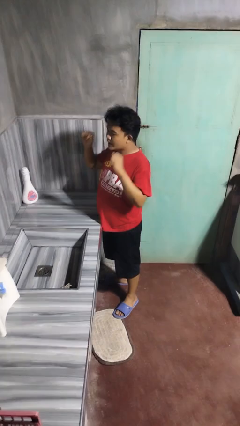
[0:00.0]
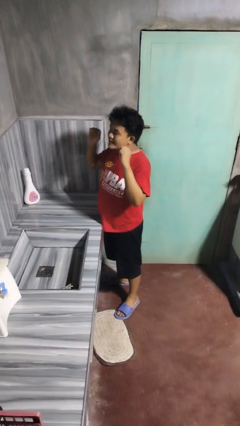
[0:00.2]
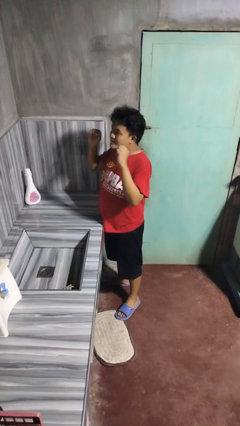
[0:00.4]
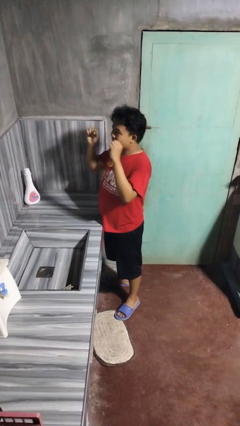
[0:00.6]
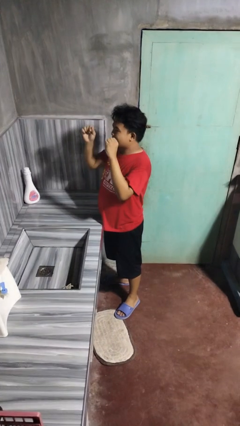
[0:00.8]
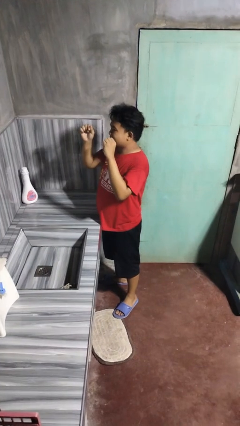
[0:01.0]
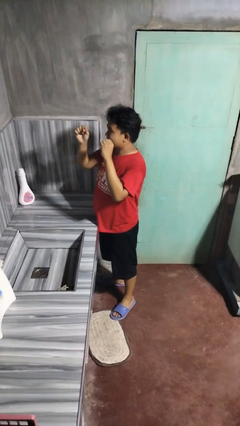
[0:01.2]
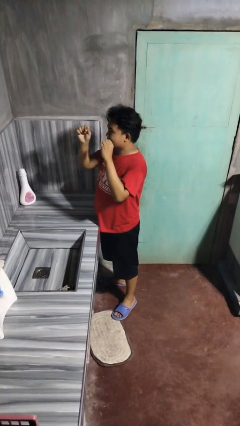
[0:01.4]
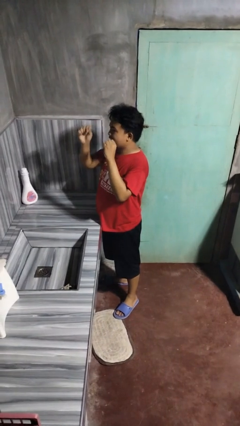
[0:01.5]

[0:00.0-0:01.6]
person flosses

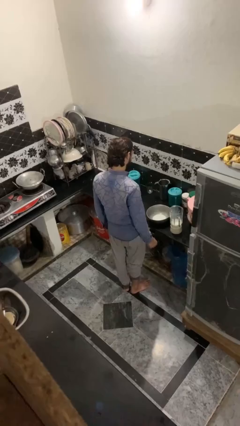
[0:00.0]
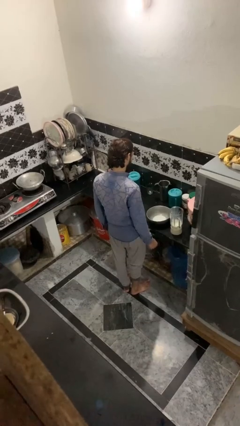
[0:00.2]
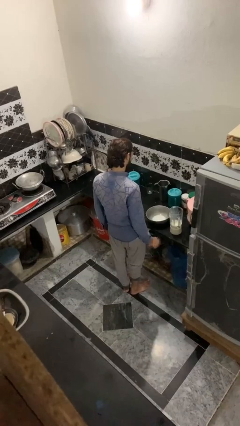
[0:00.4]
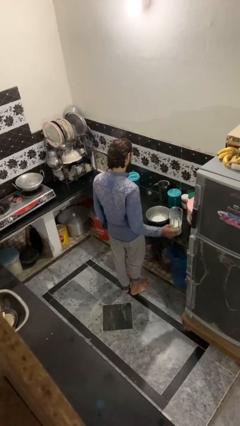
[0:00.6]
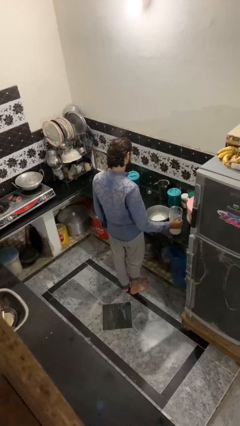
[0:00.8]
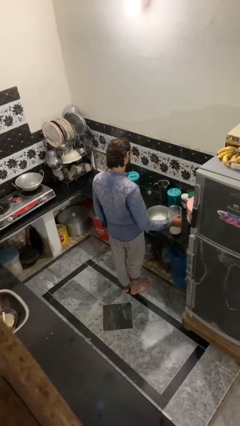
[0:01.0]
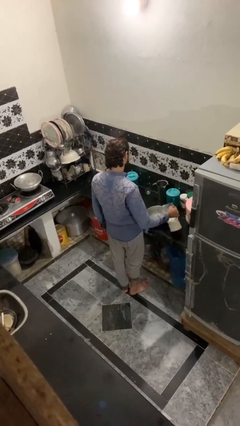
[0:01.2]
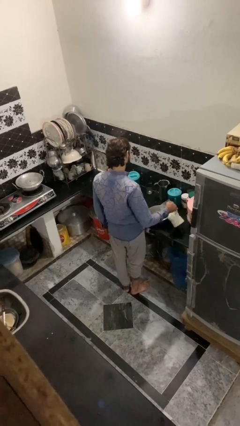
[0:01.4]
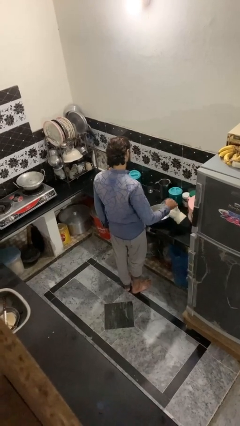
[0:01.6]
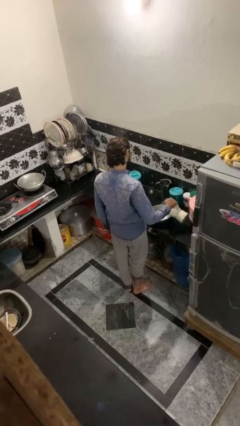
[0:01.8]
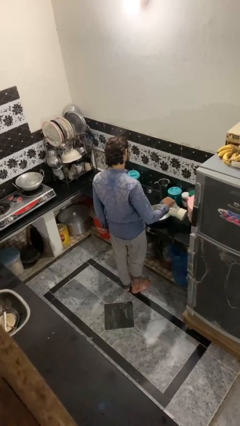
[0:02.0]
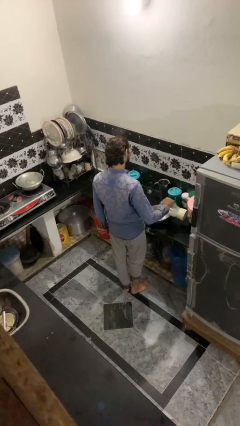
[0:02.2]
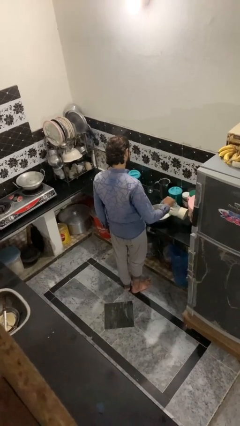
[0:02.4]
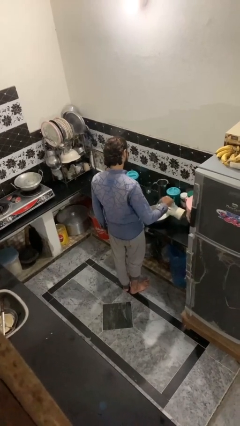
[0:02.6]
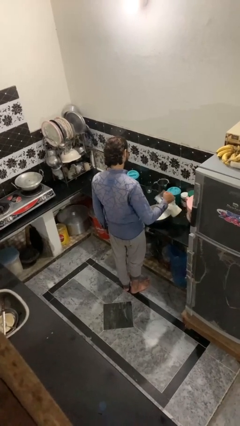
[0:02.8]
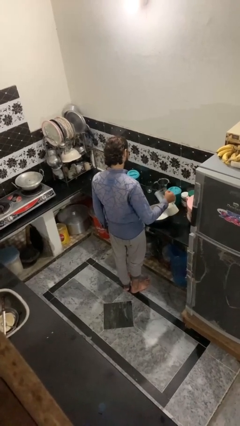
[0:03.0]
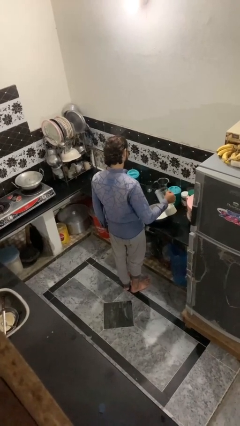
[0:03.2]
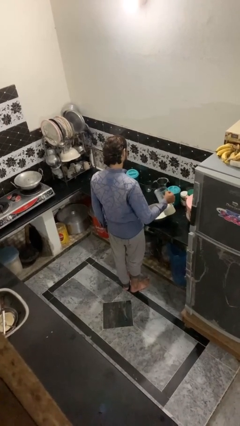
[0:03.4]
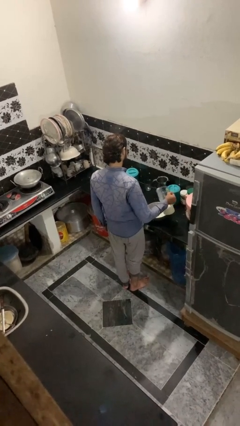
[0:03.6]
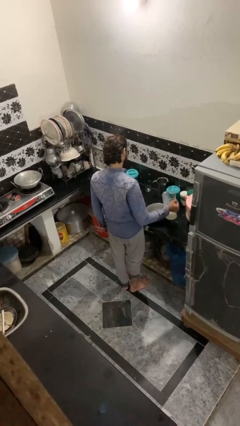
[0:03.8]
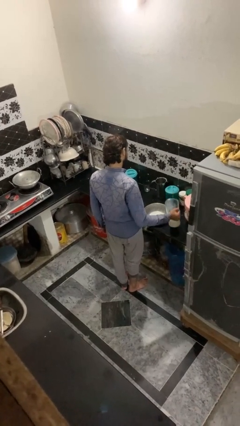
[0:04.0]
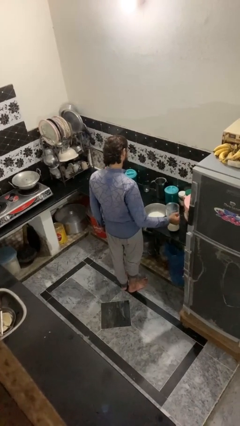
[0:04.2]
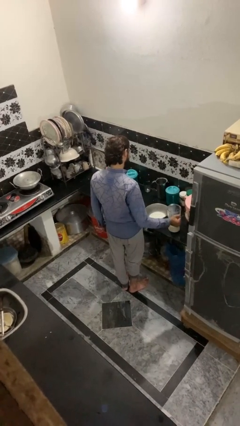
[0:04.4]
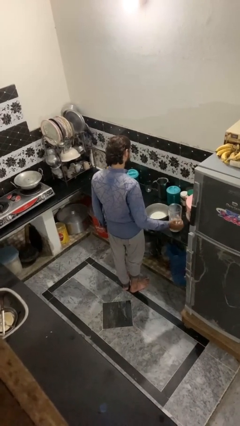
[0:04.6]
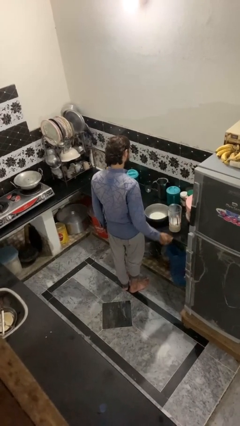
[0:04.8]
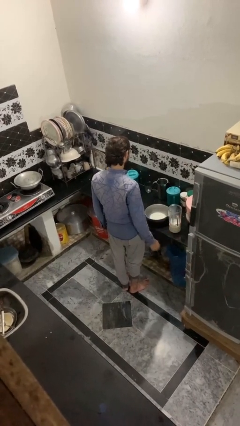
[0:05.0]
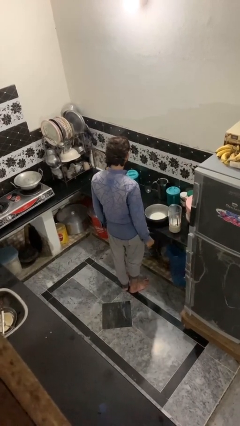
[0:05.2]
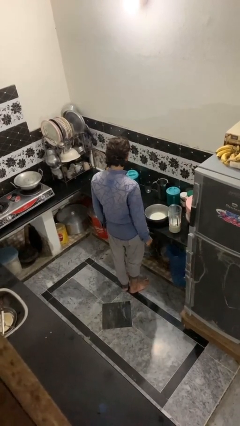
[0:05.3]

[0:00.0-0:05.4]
person pours into bowl

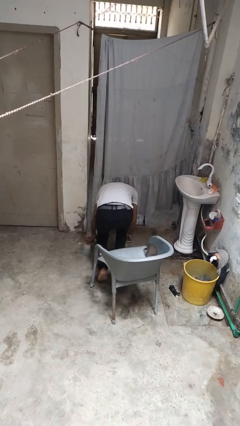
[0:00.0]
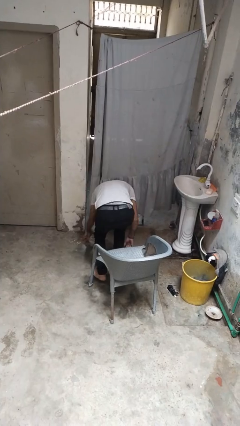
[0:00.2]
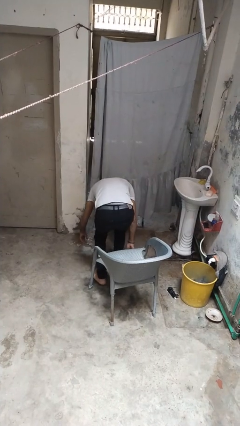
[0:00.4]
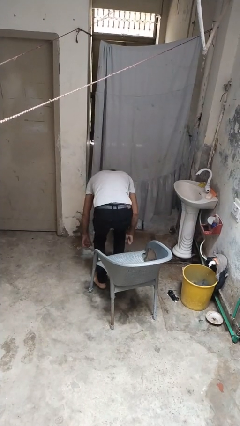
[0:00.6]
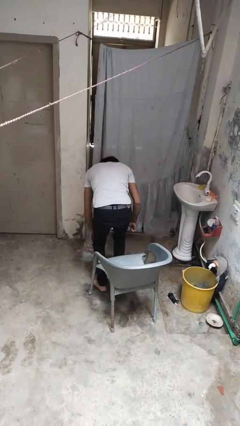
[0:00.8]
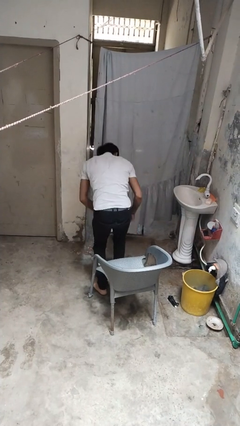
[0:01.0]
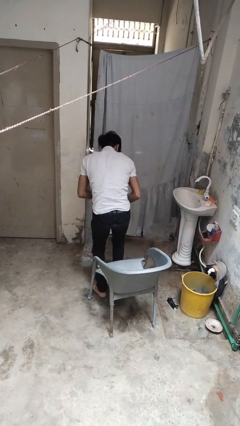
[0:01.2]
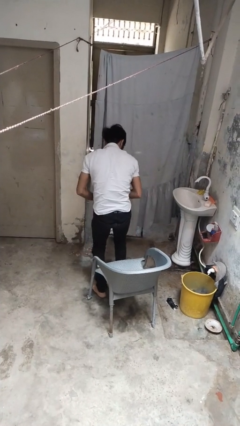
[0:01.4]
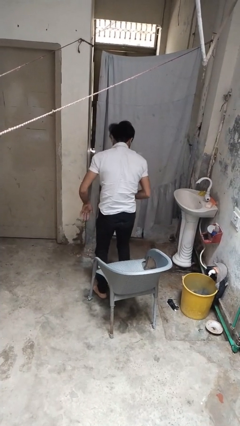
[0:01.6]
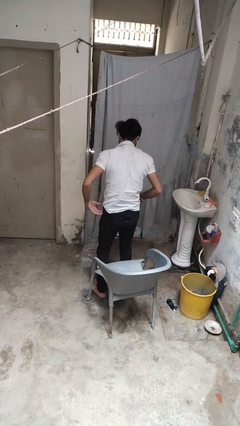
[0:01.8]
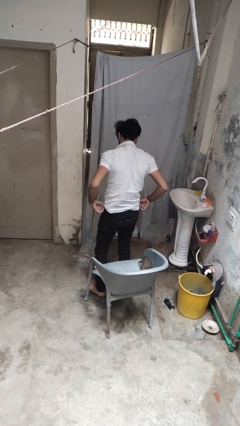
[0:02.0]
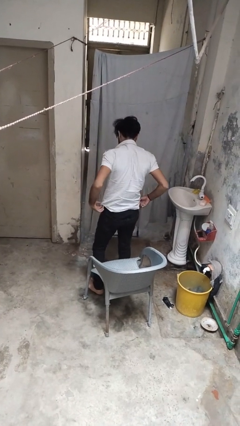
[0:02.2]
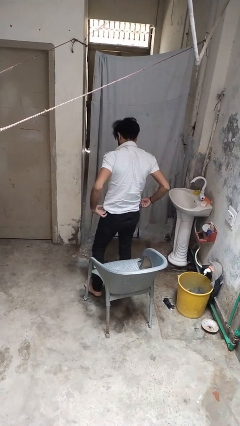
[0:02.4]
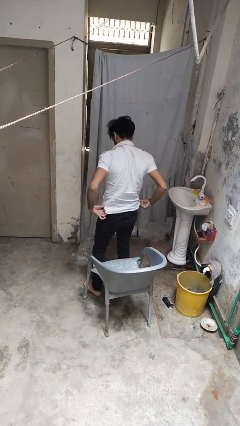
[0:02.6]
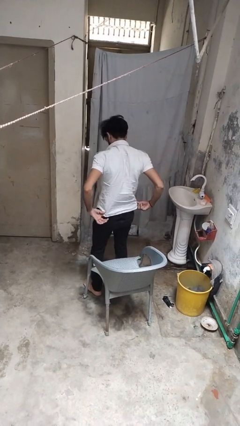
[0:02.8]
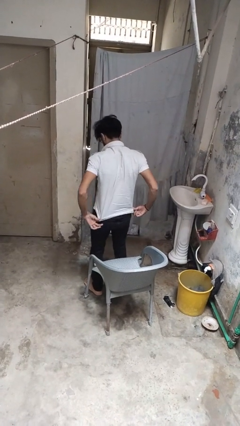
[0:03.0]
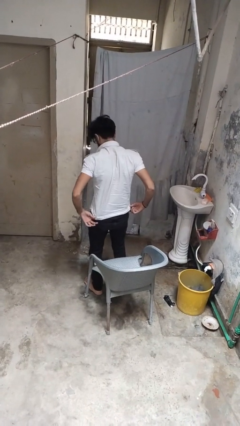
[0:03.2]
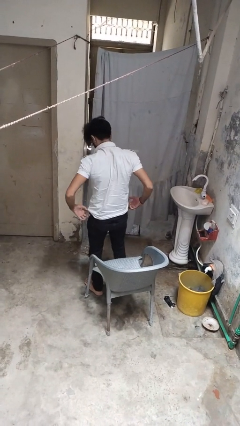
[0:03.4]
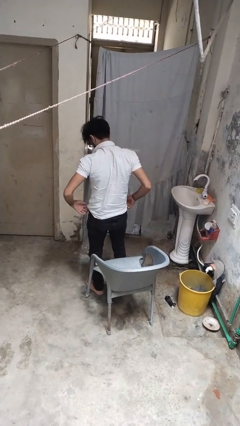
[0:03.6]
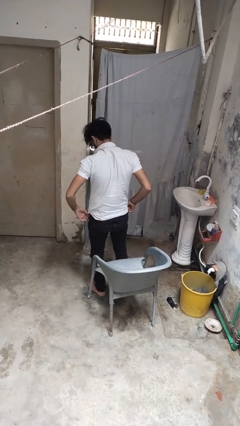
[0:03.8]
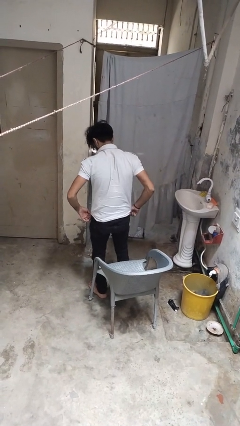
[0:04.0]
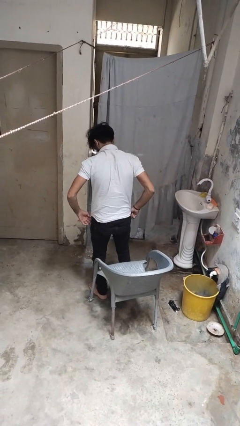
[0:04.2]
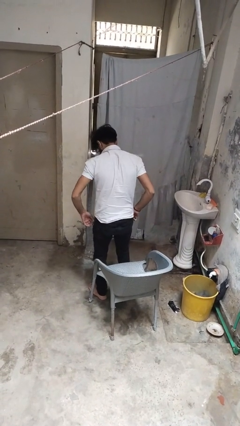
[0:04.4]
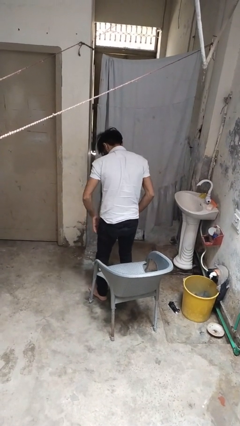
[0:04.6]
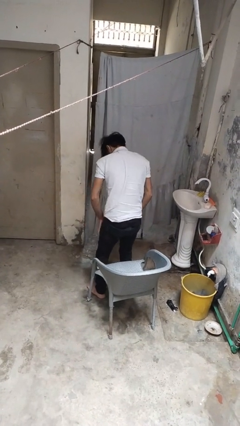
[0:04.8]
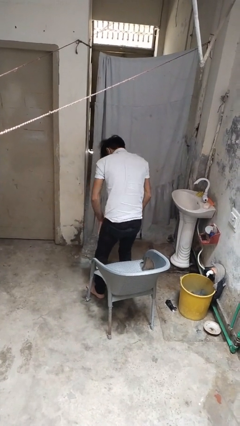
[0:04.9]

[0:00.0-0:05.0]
person stands up from floor

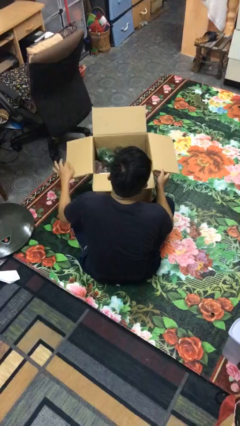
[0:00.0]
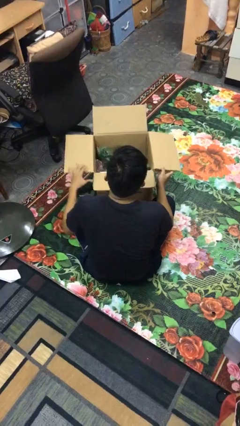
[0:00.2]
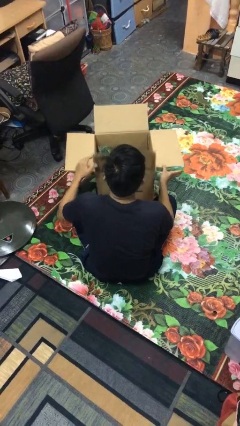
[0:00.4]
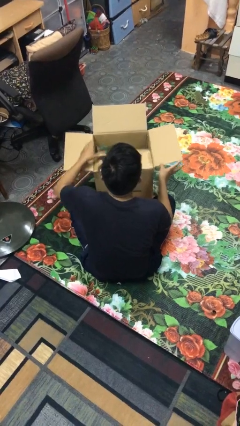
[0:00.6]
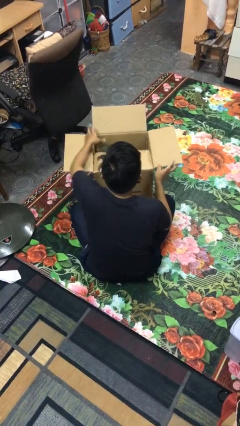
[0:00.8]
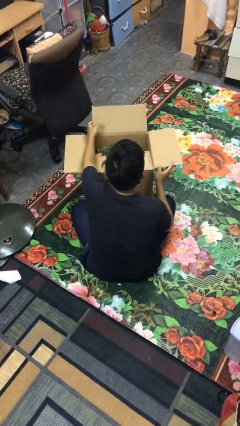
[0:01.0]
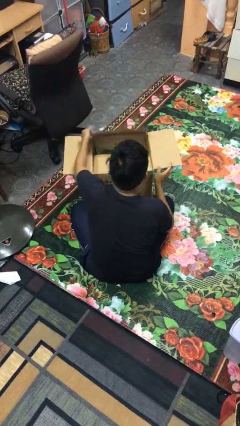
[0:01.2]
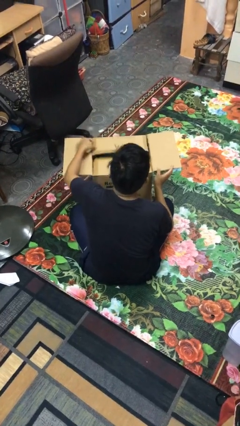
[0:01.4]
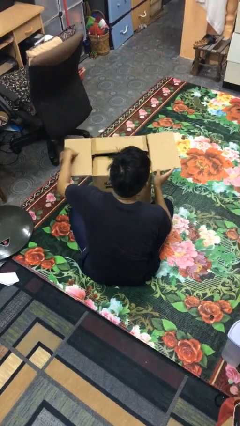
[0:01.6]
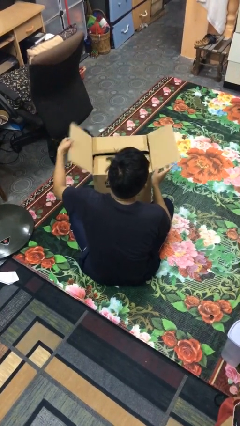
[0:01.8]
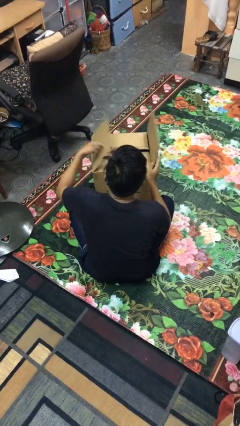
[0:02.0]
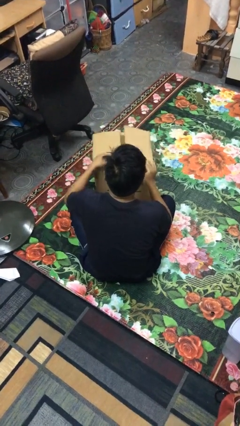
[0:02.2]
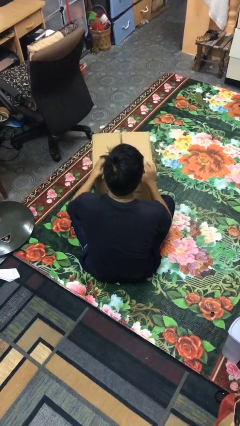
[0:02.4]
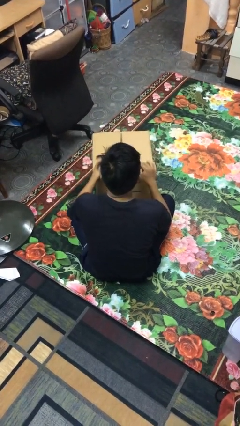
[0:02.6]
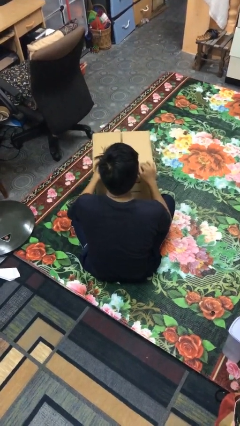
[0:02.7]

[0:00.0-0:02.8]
person closes box

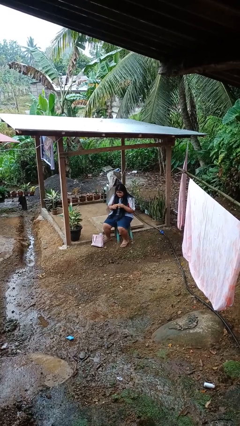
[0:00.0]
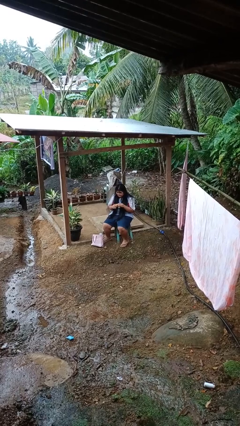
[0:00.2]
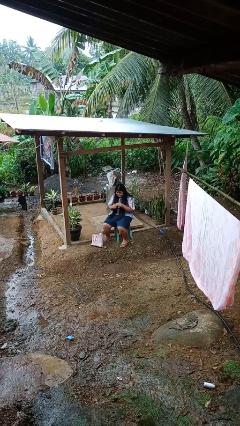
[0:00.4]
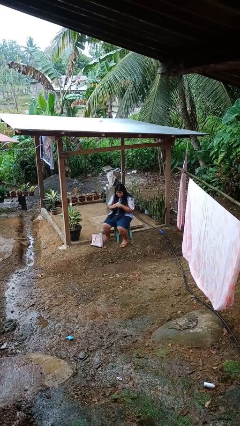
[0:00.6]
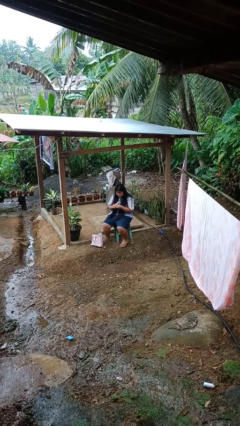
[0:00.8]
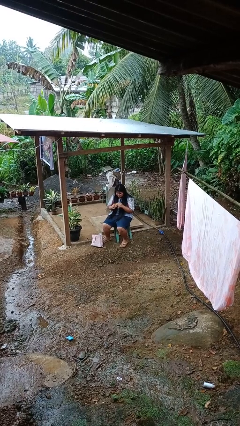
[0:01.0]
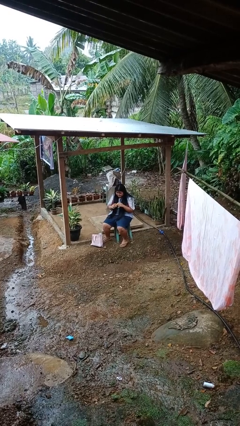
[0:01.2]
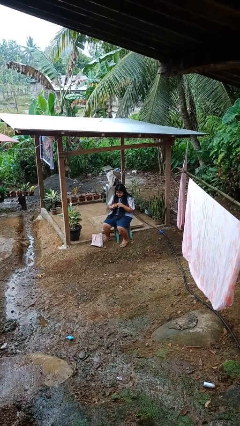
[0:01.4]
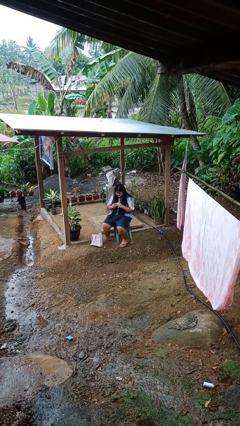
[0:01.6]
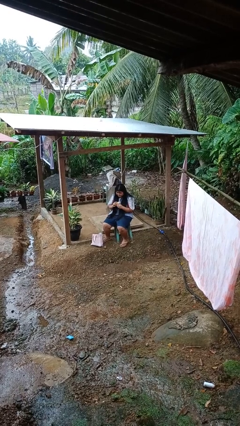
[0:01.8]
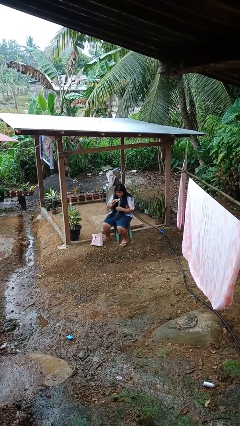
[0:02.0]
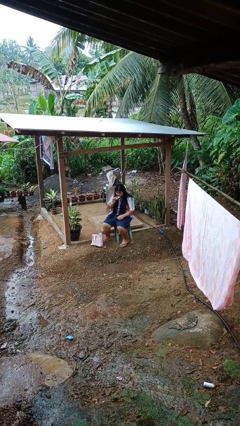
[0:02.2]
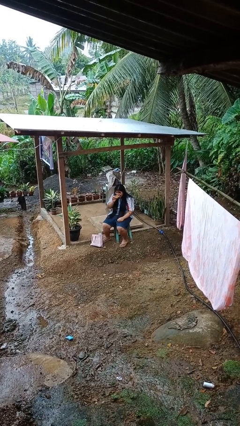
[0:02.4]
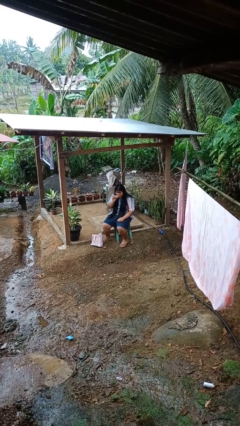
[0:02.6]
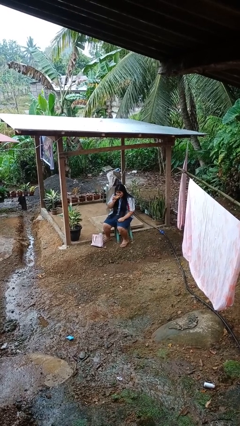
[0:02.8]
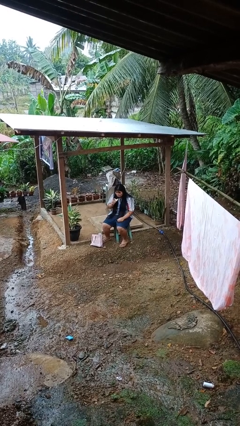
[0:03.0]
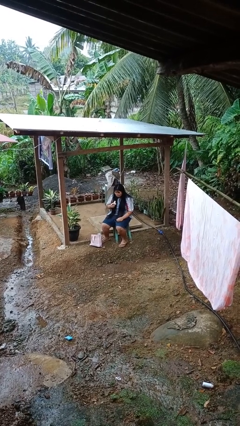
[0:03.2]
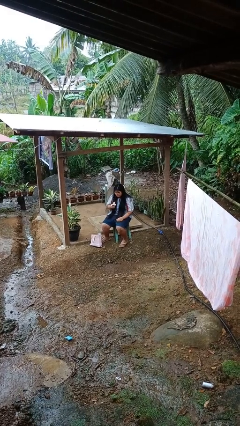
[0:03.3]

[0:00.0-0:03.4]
person eats banana
